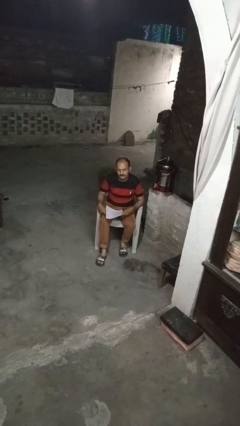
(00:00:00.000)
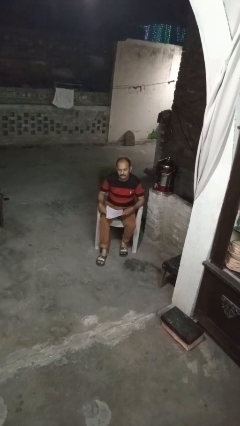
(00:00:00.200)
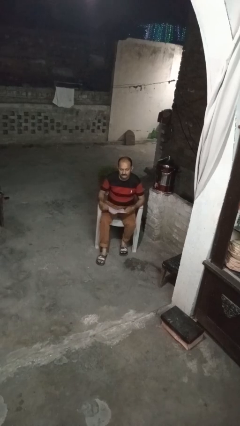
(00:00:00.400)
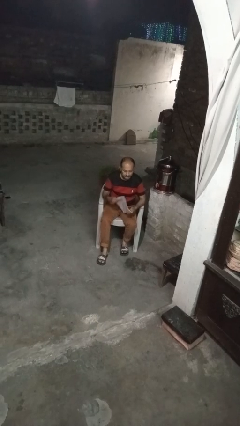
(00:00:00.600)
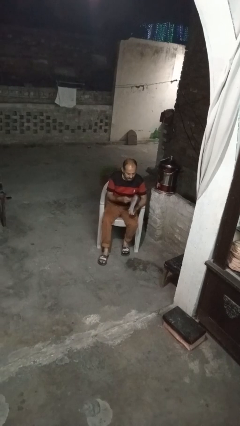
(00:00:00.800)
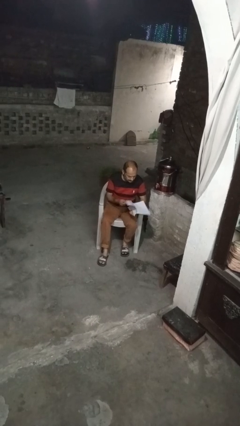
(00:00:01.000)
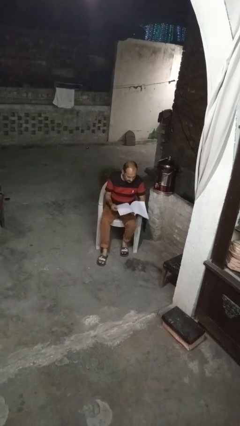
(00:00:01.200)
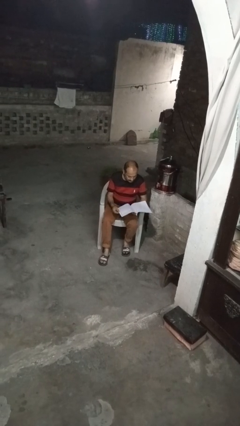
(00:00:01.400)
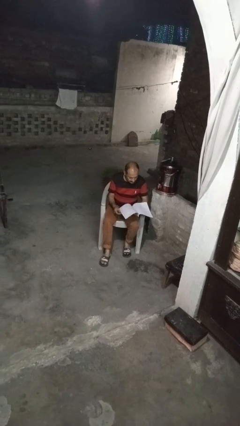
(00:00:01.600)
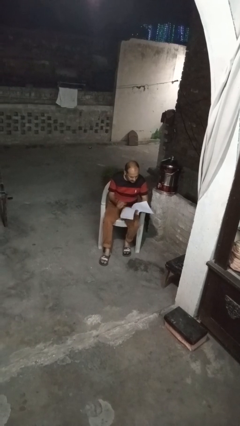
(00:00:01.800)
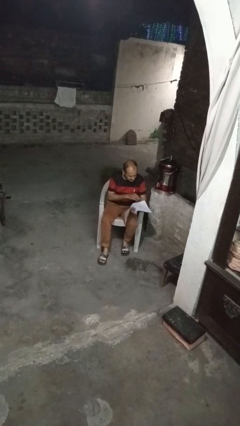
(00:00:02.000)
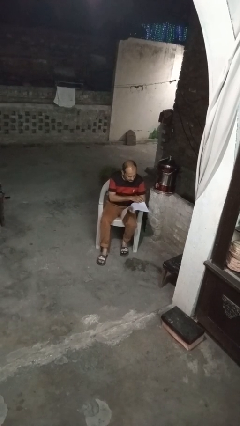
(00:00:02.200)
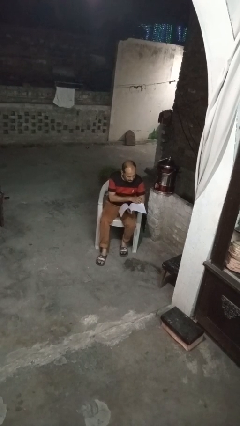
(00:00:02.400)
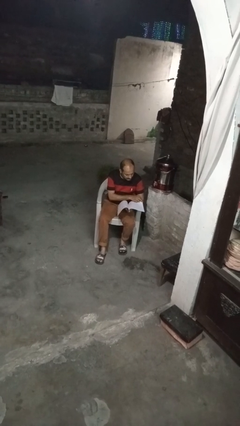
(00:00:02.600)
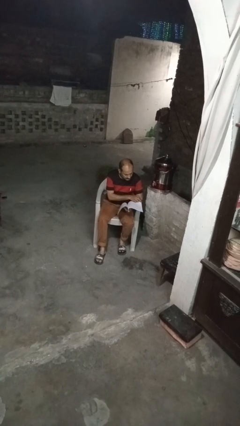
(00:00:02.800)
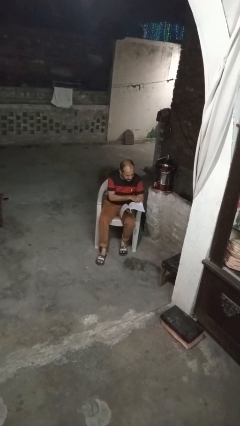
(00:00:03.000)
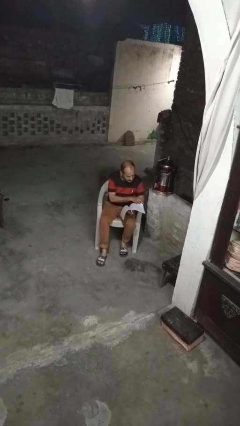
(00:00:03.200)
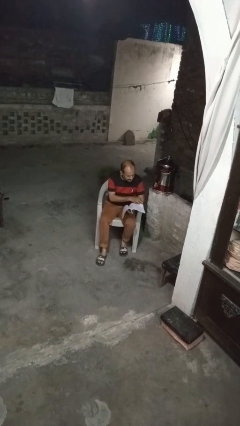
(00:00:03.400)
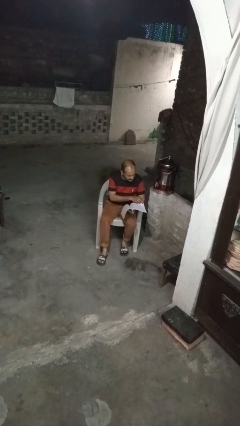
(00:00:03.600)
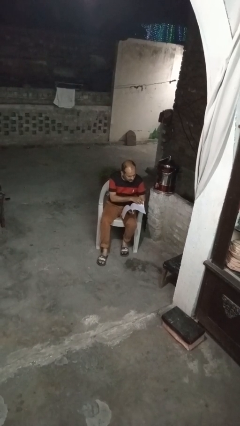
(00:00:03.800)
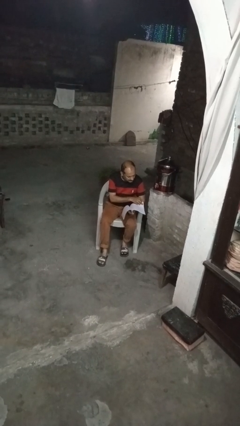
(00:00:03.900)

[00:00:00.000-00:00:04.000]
person reads magazine

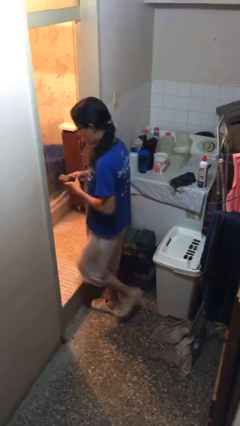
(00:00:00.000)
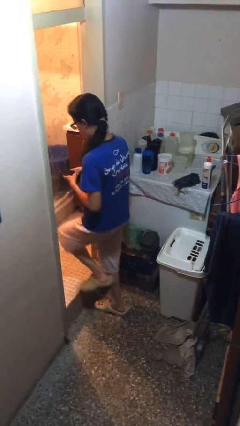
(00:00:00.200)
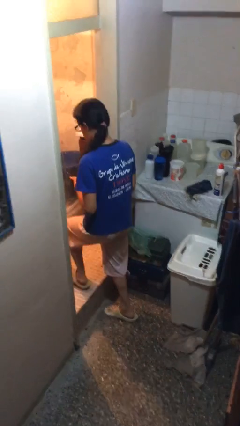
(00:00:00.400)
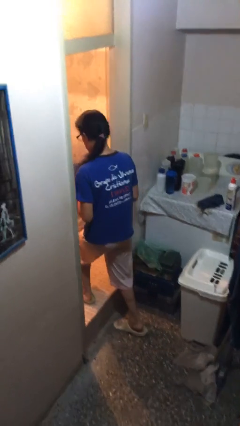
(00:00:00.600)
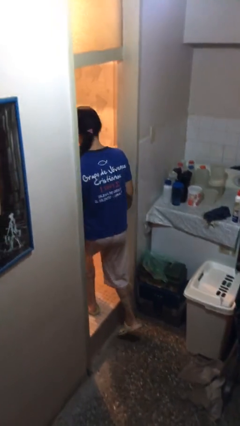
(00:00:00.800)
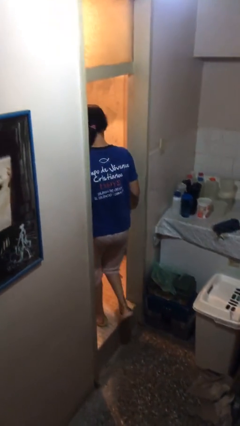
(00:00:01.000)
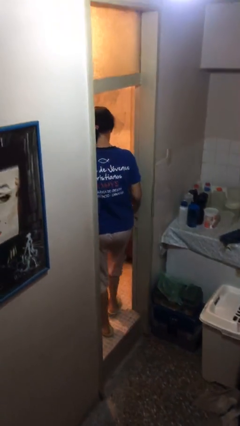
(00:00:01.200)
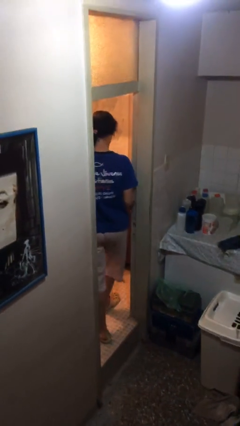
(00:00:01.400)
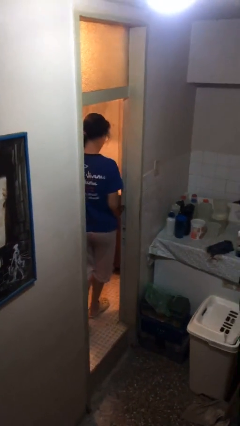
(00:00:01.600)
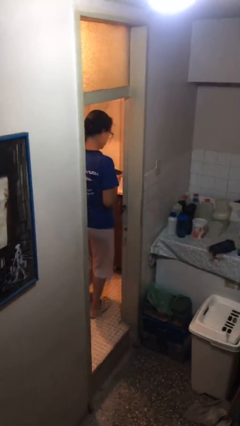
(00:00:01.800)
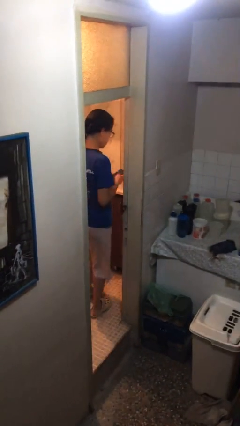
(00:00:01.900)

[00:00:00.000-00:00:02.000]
person exits scene through structure

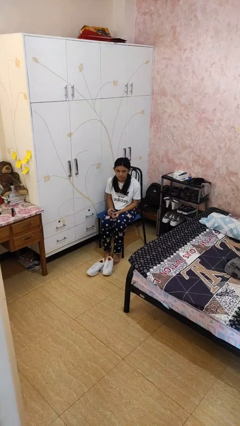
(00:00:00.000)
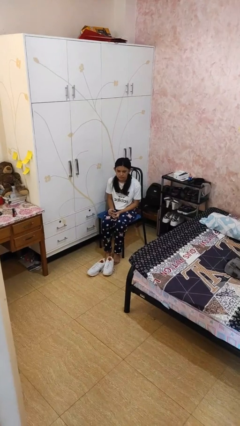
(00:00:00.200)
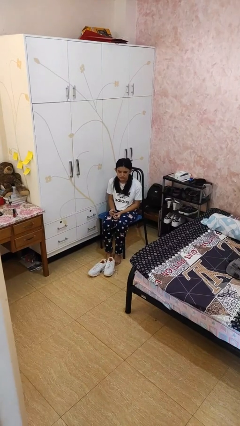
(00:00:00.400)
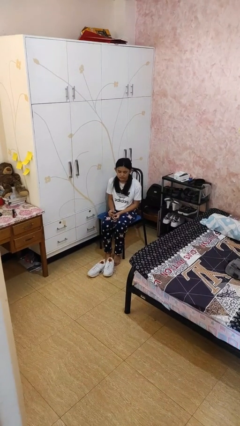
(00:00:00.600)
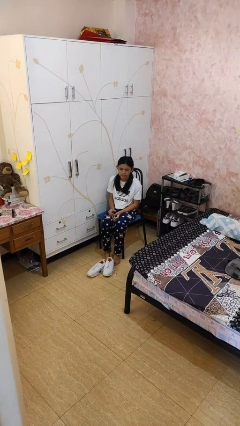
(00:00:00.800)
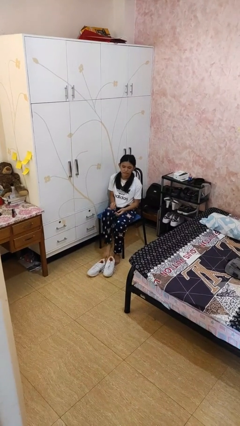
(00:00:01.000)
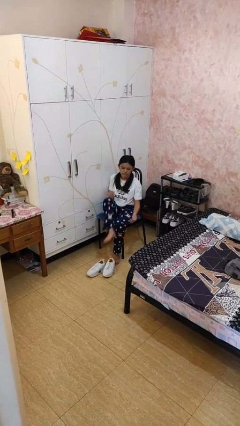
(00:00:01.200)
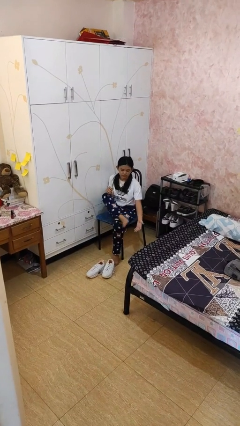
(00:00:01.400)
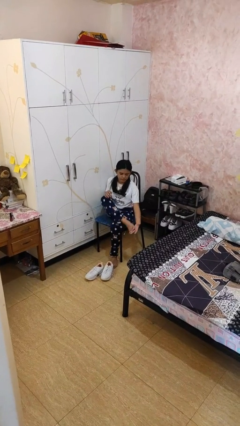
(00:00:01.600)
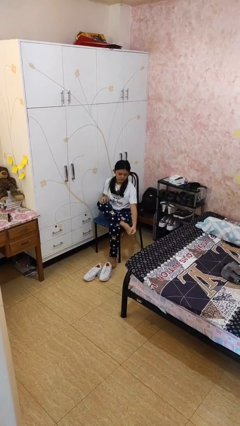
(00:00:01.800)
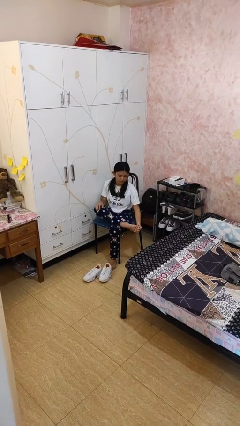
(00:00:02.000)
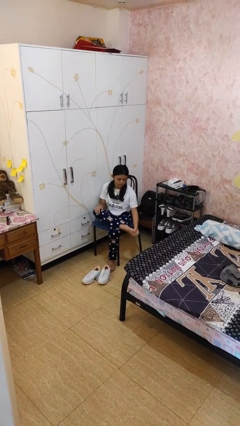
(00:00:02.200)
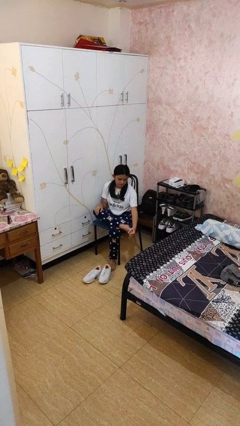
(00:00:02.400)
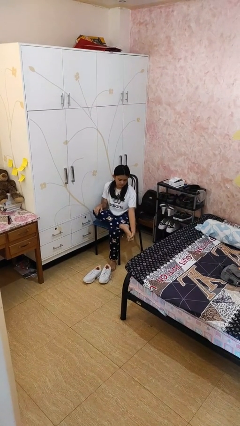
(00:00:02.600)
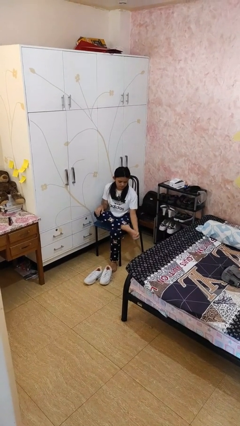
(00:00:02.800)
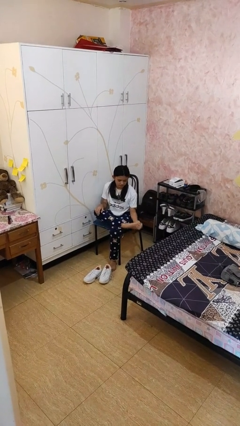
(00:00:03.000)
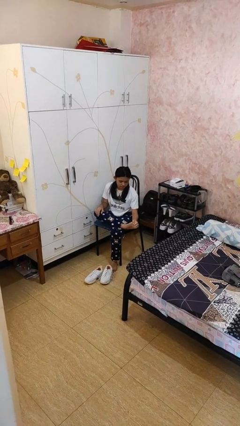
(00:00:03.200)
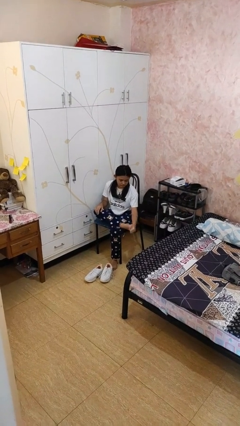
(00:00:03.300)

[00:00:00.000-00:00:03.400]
person rubs foot

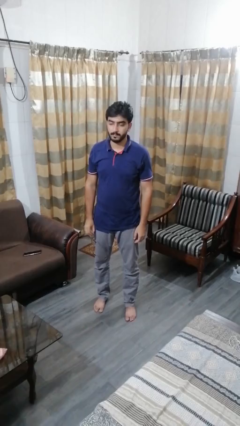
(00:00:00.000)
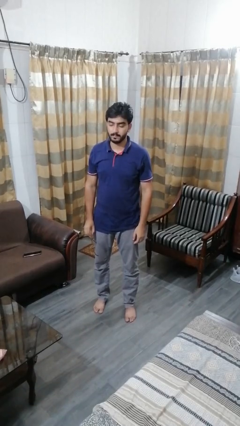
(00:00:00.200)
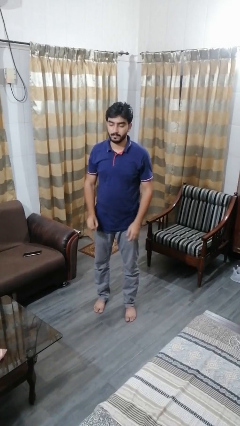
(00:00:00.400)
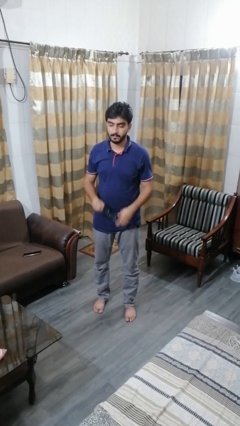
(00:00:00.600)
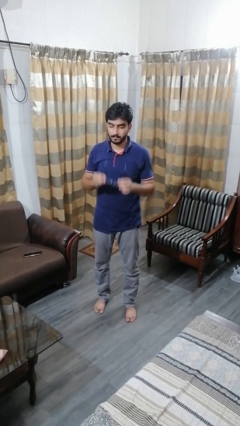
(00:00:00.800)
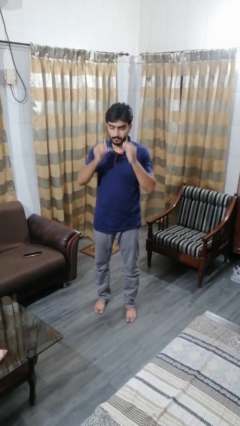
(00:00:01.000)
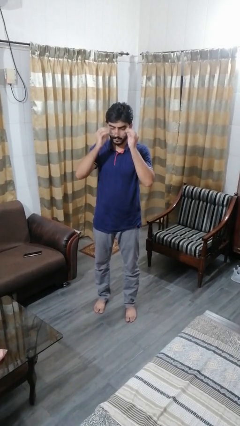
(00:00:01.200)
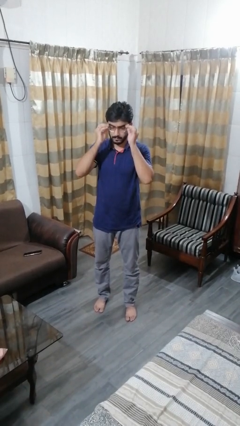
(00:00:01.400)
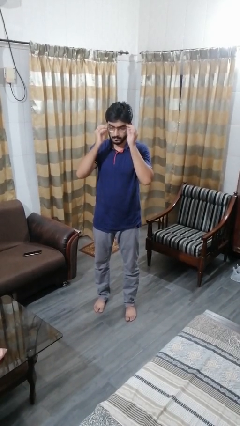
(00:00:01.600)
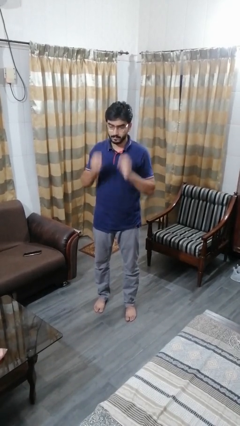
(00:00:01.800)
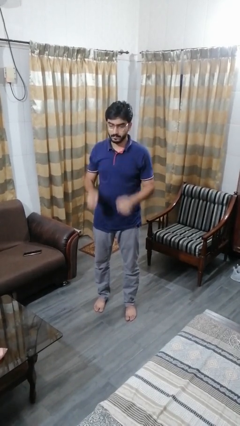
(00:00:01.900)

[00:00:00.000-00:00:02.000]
person puts on glasses

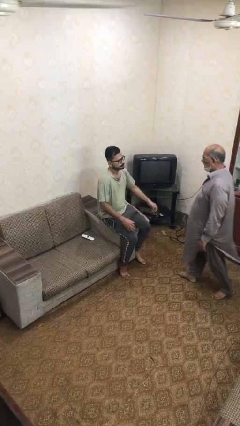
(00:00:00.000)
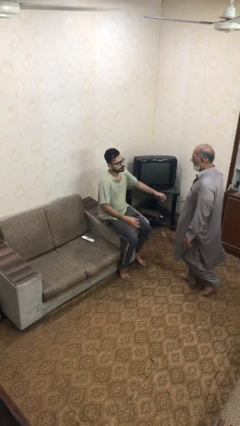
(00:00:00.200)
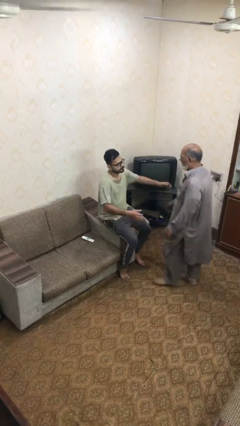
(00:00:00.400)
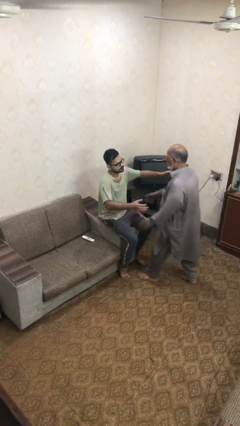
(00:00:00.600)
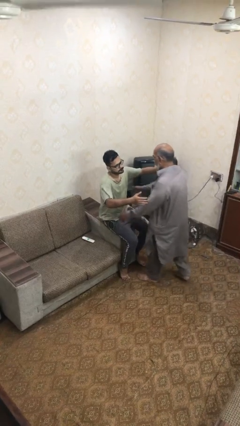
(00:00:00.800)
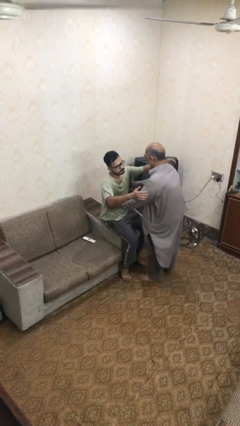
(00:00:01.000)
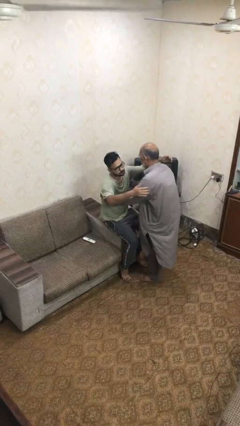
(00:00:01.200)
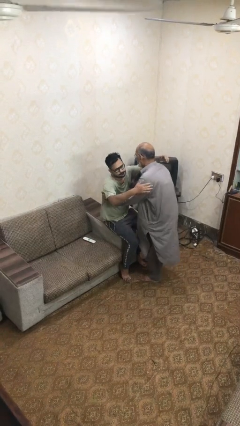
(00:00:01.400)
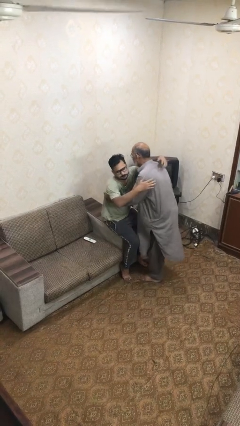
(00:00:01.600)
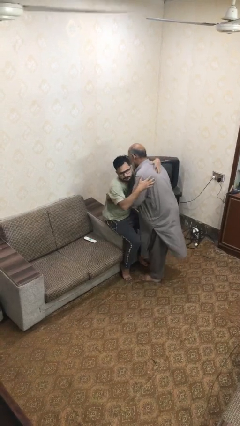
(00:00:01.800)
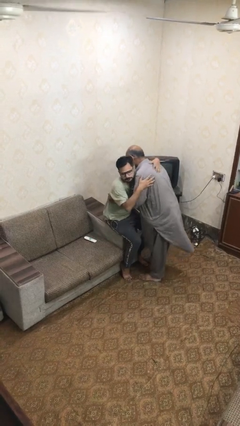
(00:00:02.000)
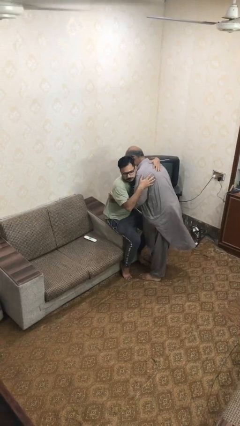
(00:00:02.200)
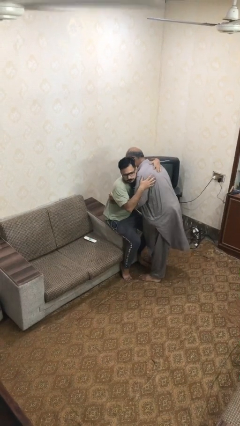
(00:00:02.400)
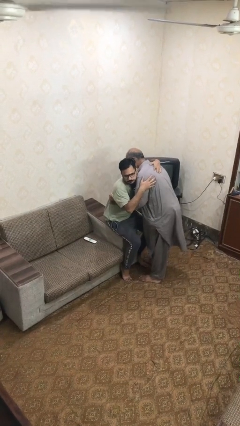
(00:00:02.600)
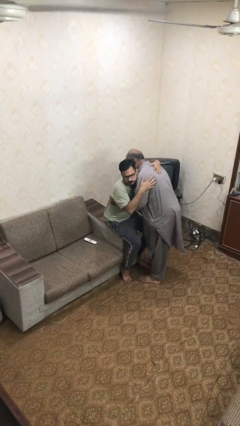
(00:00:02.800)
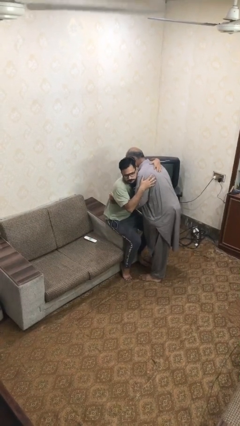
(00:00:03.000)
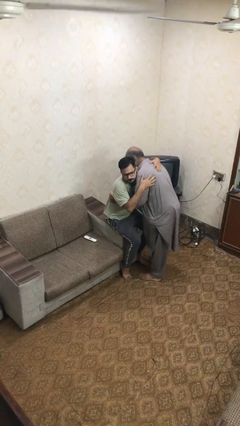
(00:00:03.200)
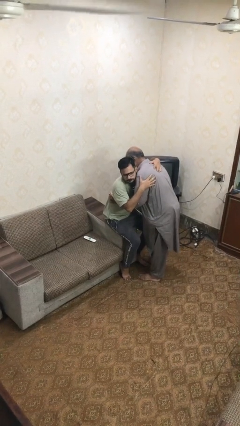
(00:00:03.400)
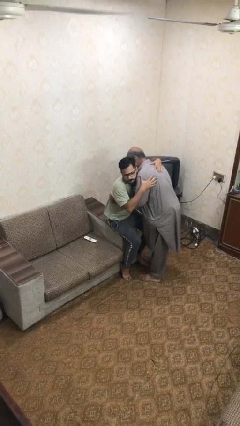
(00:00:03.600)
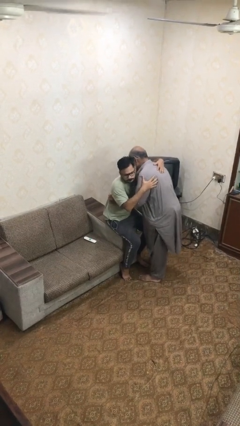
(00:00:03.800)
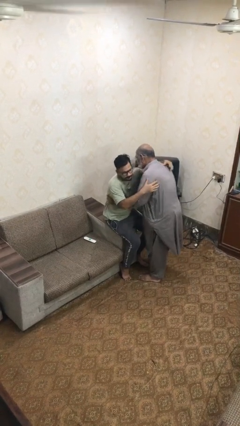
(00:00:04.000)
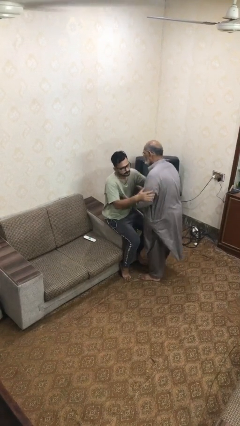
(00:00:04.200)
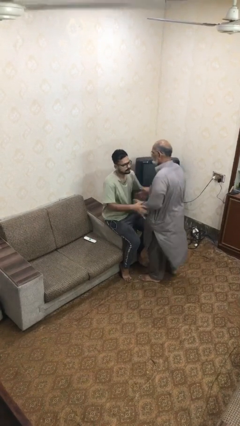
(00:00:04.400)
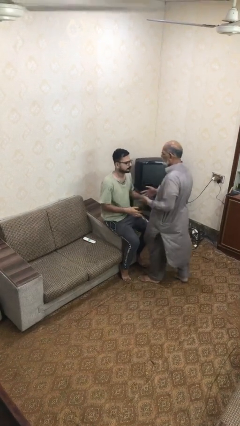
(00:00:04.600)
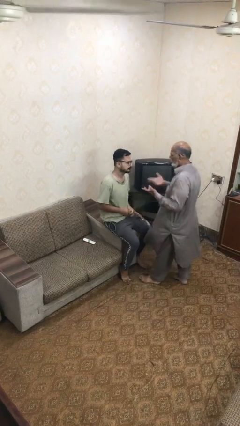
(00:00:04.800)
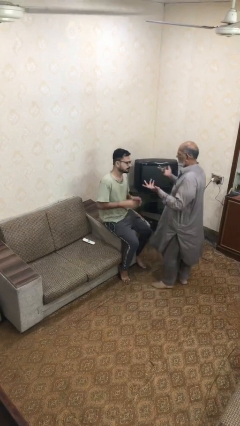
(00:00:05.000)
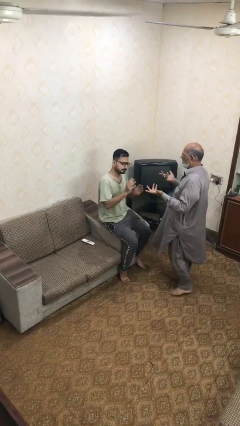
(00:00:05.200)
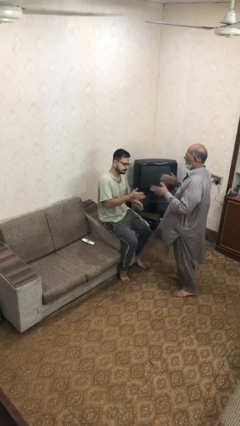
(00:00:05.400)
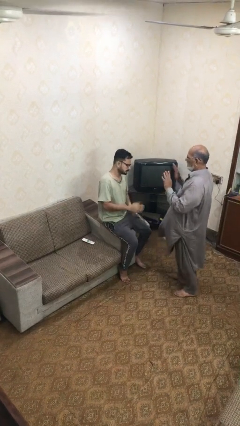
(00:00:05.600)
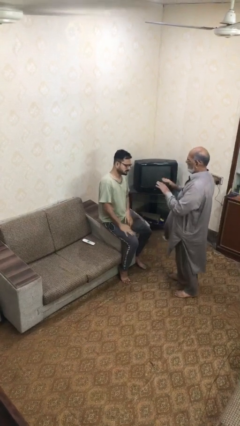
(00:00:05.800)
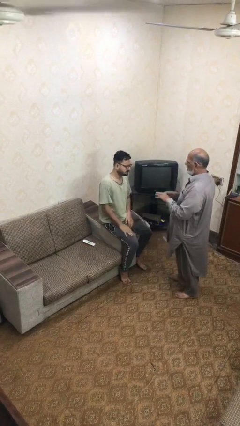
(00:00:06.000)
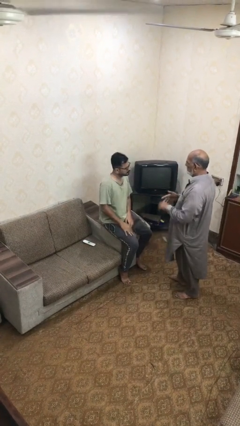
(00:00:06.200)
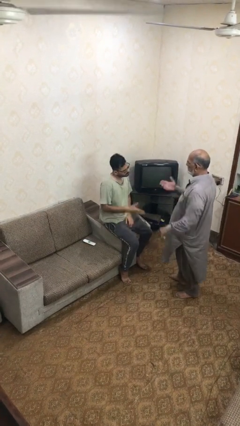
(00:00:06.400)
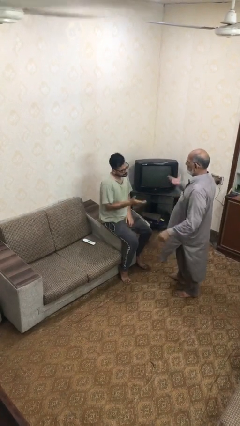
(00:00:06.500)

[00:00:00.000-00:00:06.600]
person embraces person
